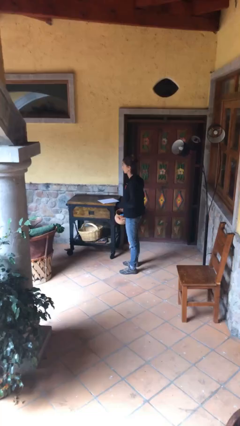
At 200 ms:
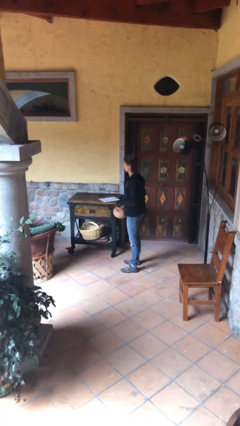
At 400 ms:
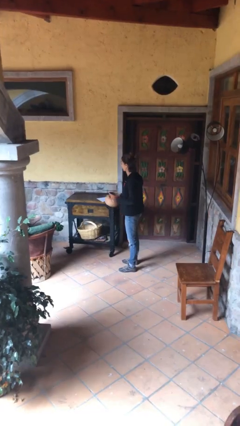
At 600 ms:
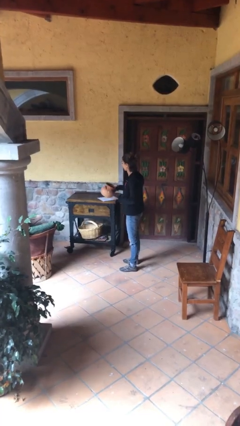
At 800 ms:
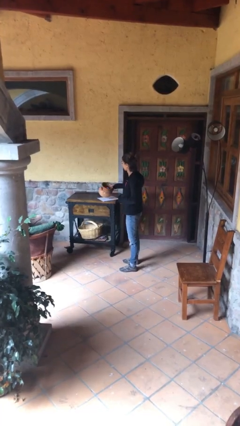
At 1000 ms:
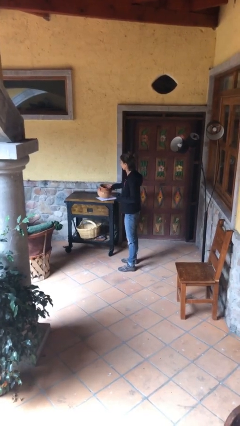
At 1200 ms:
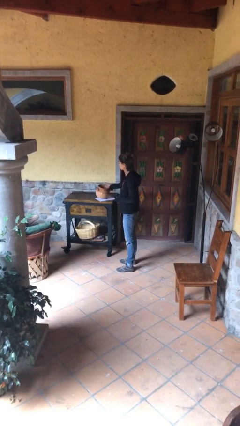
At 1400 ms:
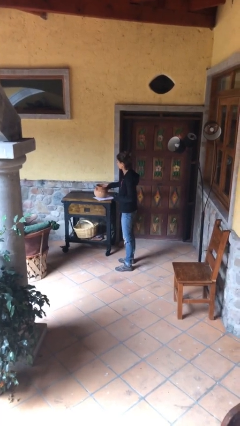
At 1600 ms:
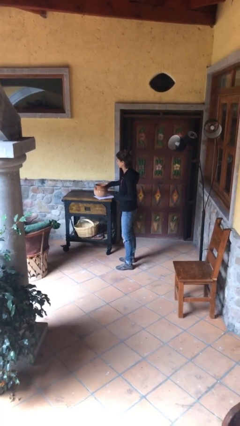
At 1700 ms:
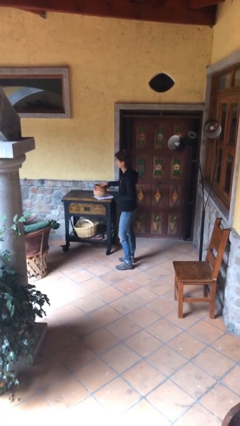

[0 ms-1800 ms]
person puts down object on table

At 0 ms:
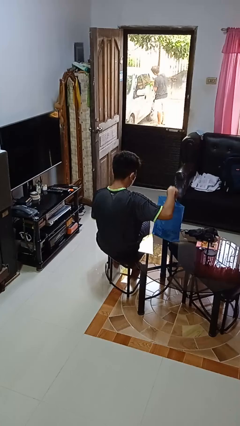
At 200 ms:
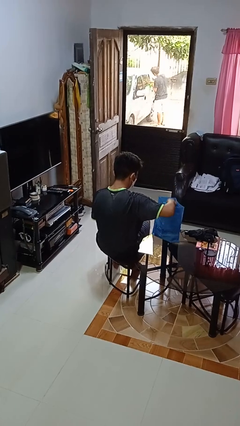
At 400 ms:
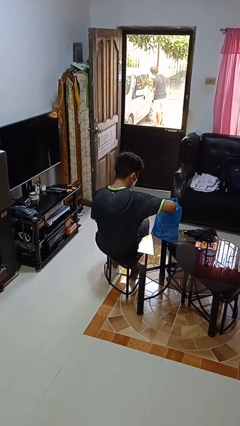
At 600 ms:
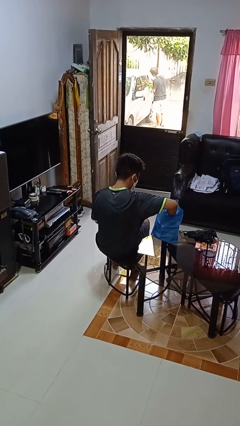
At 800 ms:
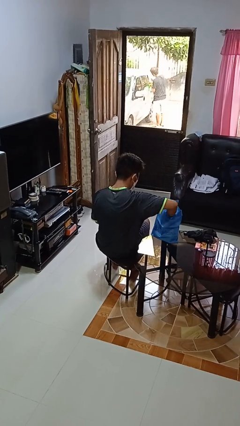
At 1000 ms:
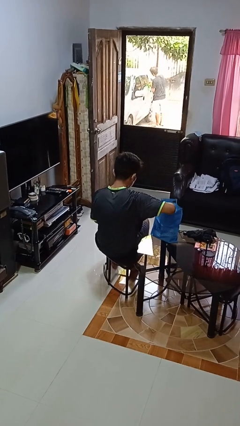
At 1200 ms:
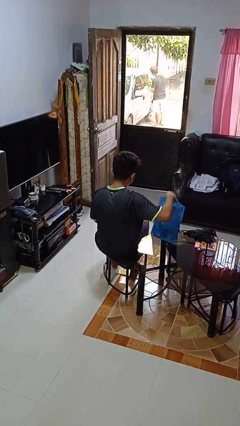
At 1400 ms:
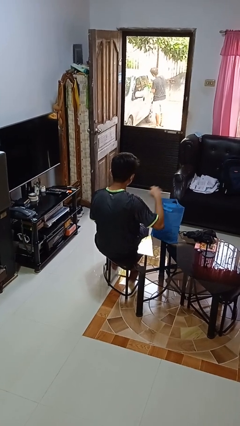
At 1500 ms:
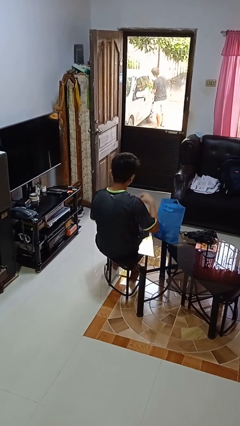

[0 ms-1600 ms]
person puts object into bag

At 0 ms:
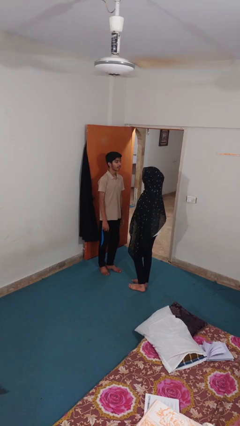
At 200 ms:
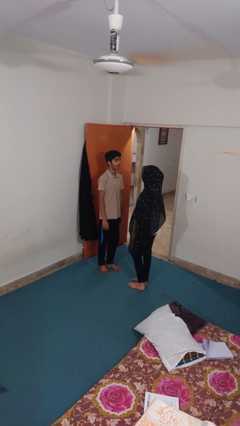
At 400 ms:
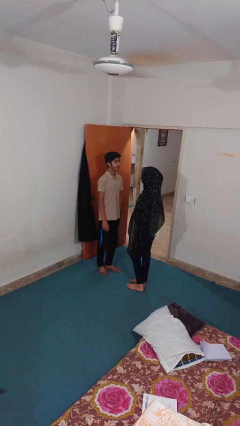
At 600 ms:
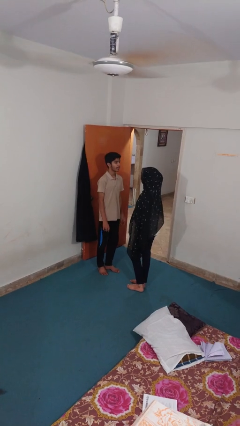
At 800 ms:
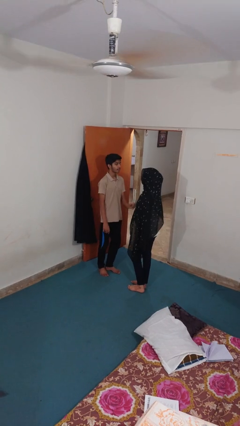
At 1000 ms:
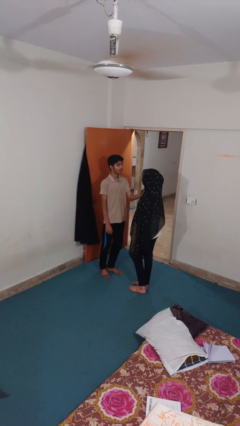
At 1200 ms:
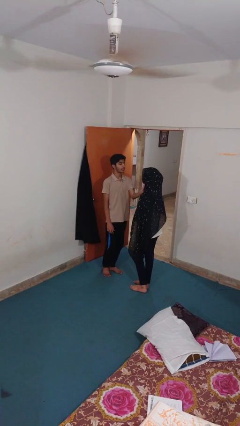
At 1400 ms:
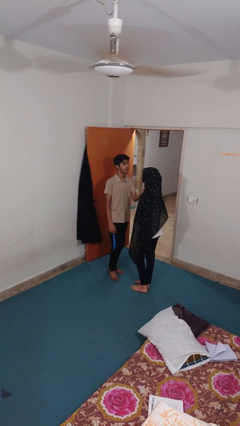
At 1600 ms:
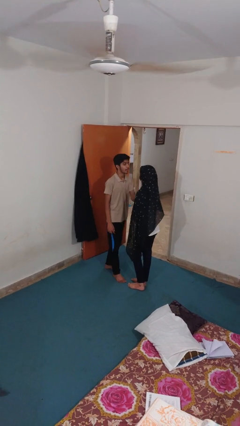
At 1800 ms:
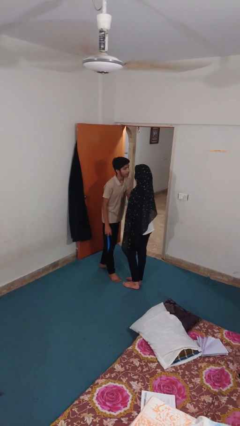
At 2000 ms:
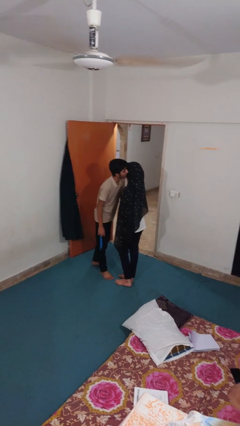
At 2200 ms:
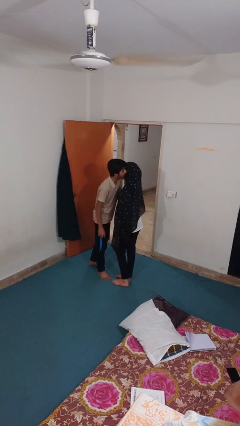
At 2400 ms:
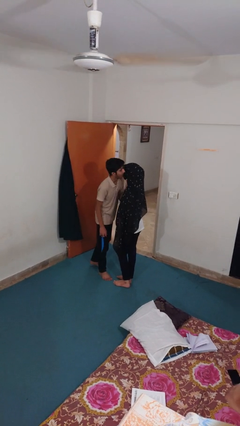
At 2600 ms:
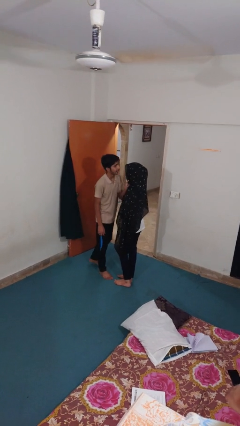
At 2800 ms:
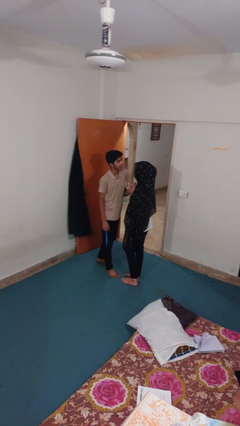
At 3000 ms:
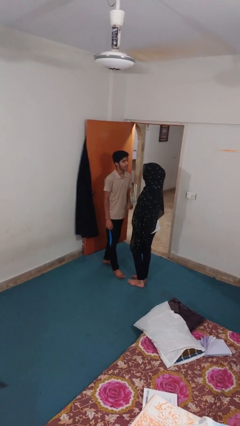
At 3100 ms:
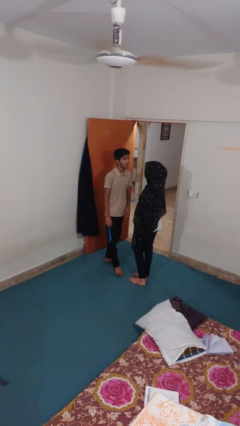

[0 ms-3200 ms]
person kisses cheek of person

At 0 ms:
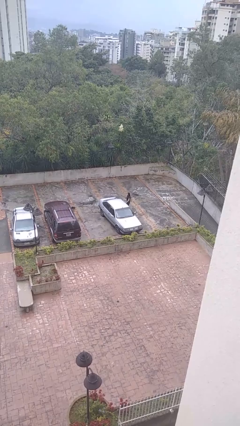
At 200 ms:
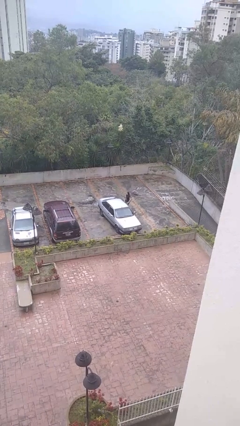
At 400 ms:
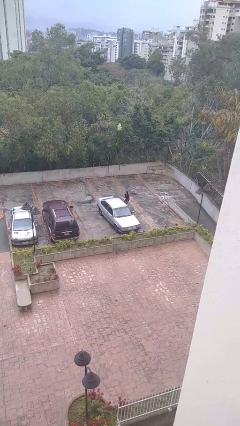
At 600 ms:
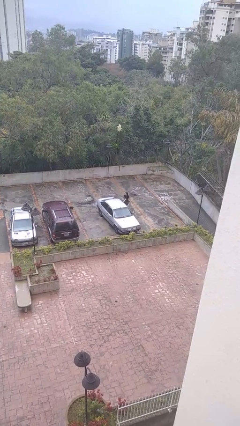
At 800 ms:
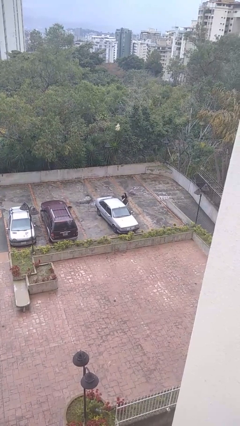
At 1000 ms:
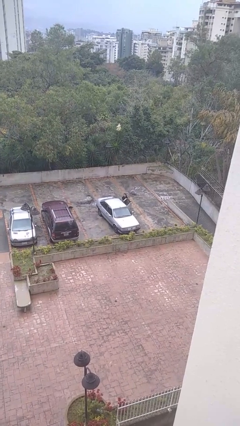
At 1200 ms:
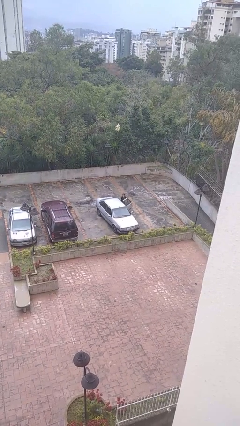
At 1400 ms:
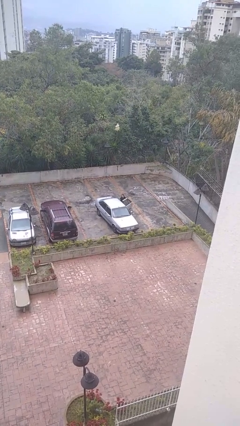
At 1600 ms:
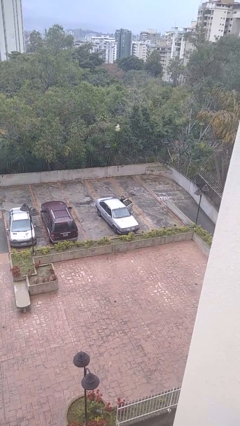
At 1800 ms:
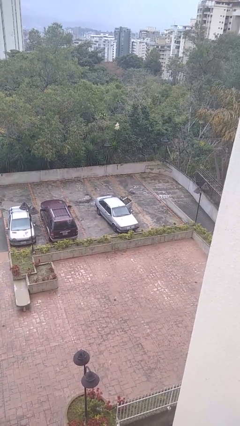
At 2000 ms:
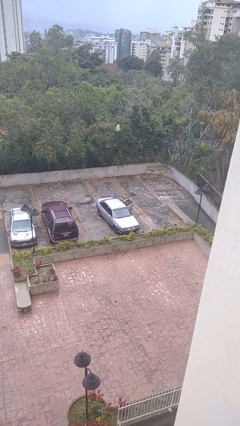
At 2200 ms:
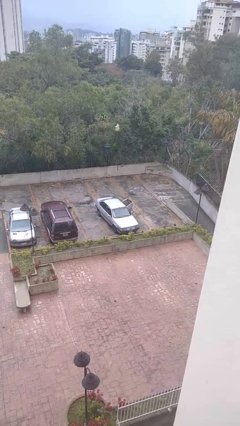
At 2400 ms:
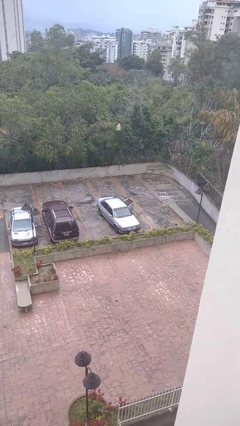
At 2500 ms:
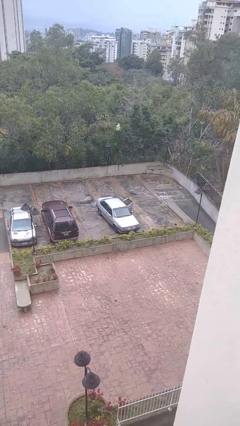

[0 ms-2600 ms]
car picks up person

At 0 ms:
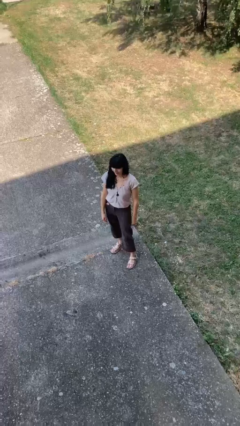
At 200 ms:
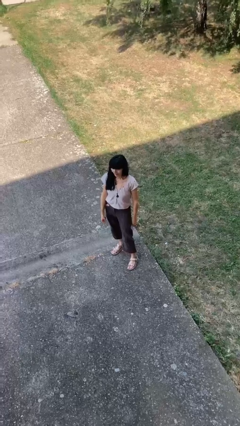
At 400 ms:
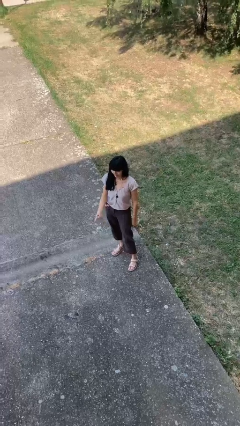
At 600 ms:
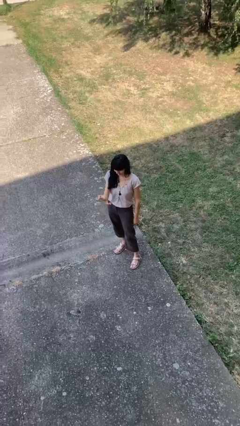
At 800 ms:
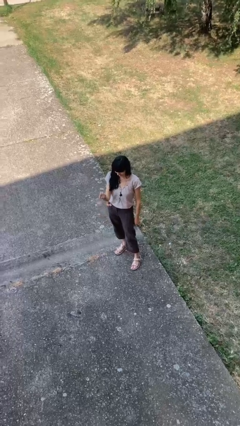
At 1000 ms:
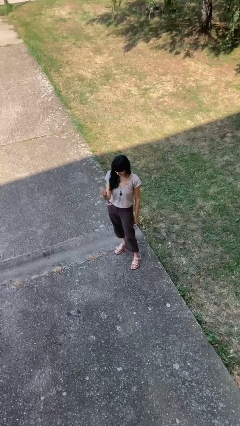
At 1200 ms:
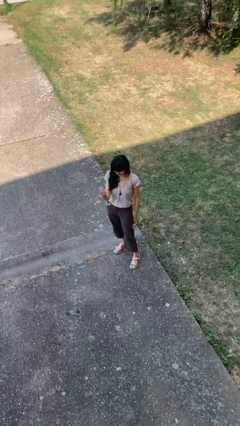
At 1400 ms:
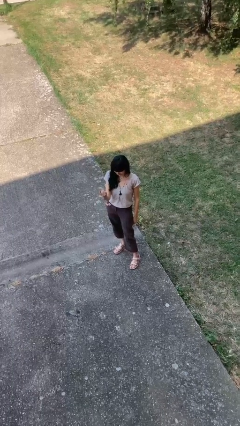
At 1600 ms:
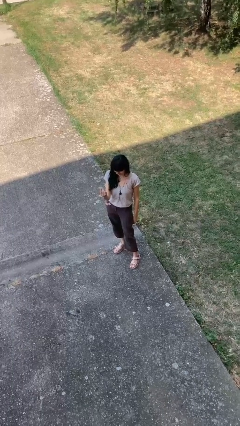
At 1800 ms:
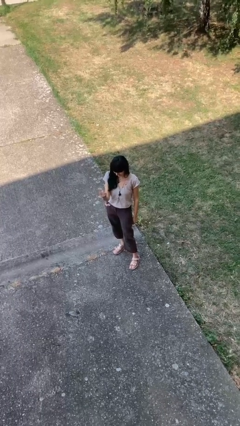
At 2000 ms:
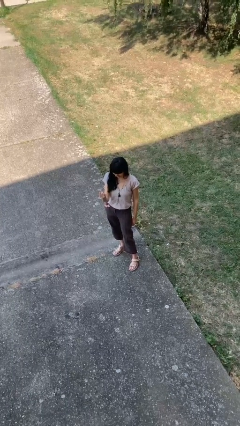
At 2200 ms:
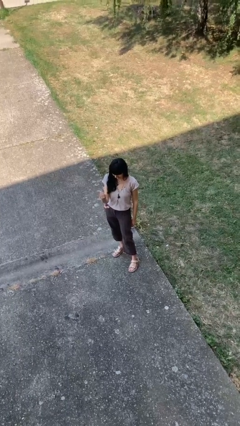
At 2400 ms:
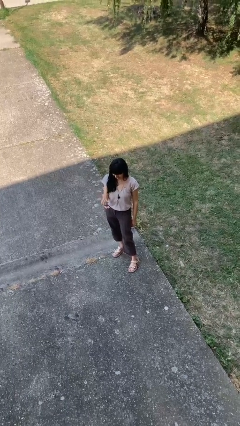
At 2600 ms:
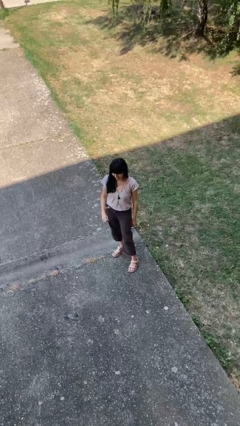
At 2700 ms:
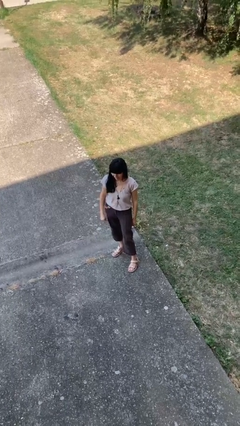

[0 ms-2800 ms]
person gestures come here

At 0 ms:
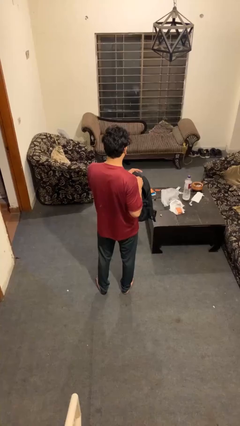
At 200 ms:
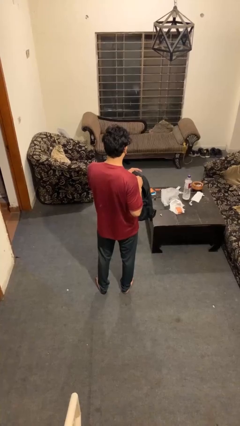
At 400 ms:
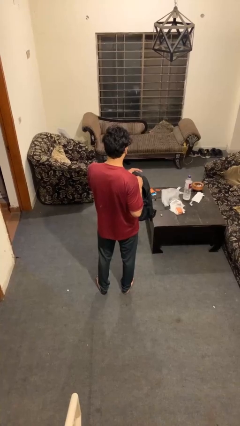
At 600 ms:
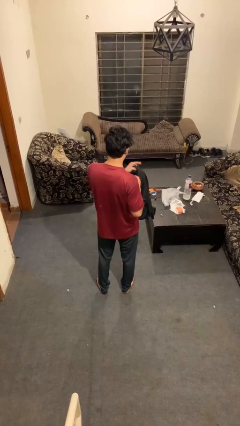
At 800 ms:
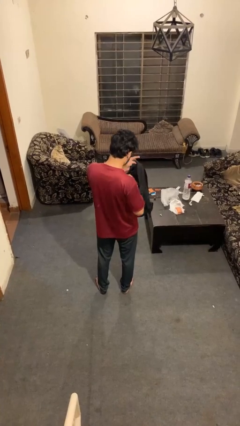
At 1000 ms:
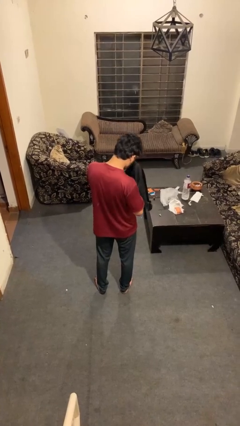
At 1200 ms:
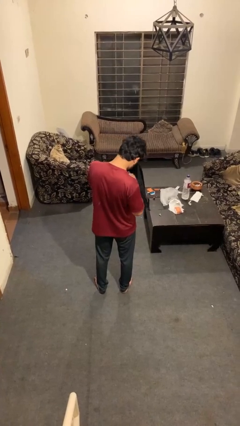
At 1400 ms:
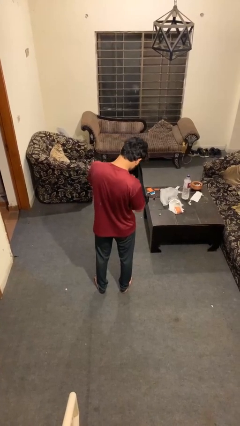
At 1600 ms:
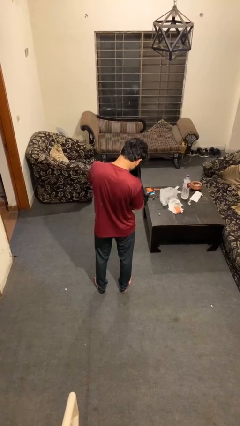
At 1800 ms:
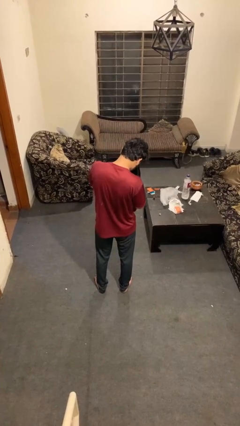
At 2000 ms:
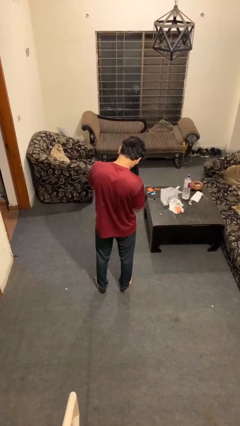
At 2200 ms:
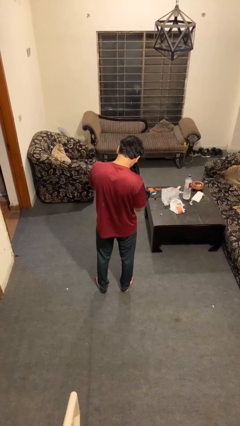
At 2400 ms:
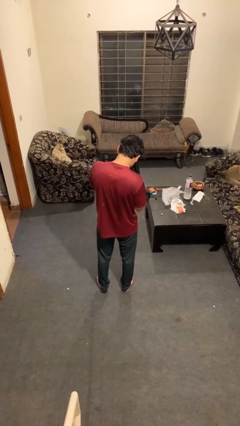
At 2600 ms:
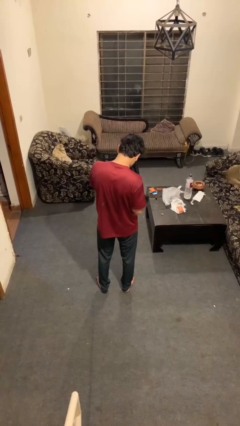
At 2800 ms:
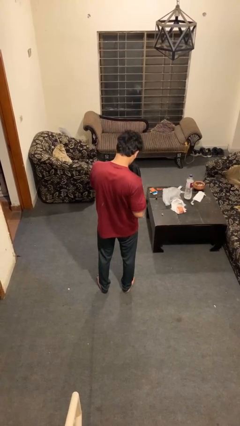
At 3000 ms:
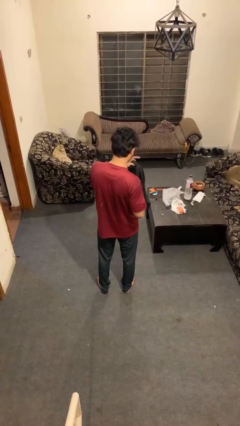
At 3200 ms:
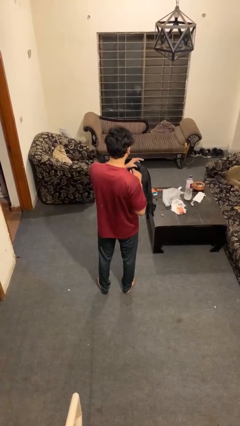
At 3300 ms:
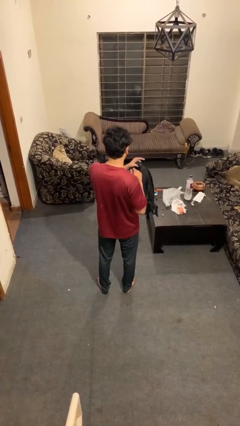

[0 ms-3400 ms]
person searches in bag

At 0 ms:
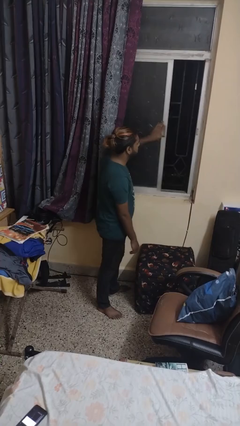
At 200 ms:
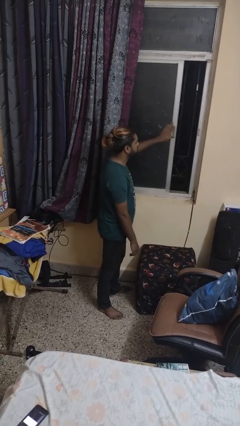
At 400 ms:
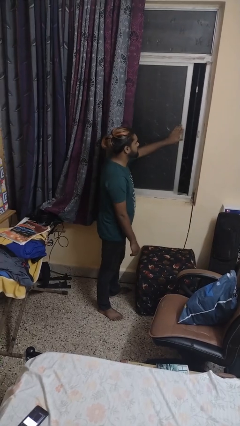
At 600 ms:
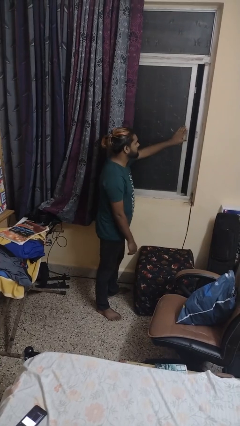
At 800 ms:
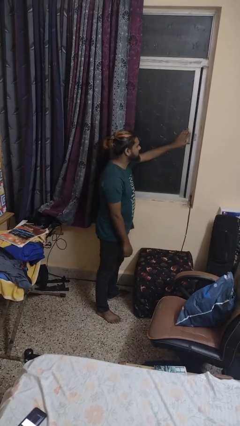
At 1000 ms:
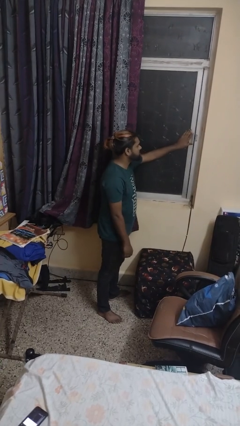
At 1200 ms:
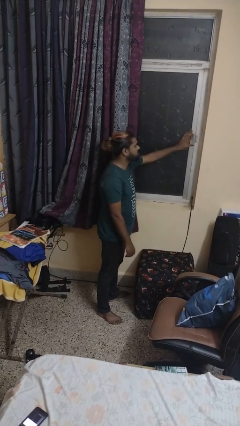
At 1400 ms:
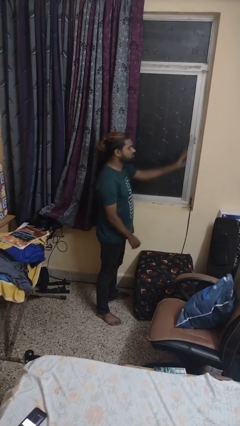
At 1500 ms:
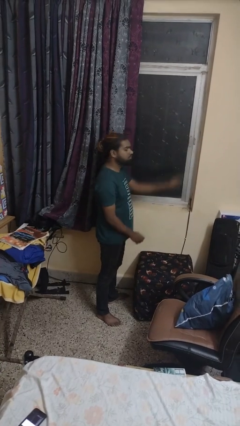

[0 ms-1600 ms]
person closes sliding door

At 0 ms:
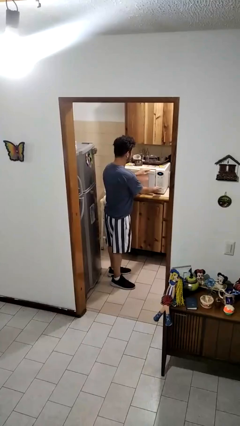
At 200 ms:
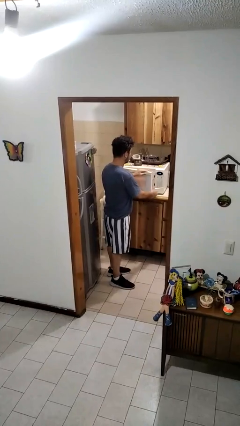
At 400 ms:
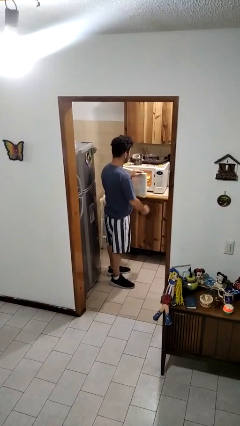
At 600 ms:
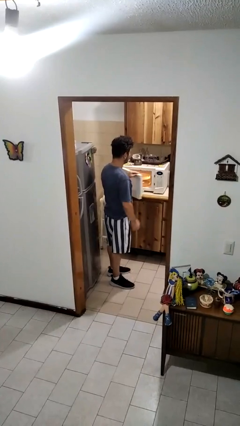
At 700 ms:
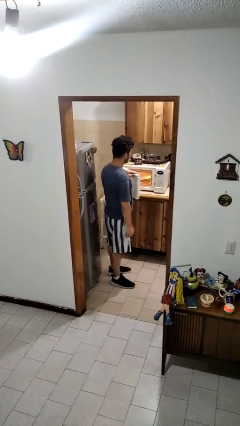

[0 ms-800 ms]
person opens microwave
